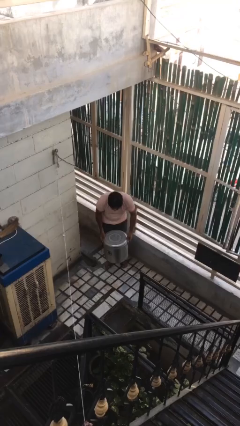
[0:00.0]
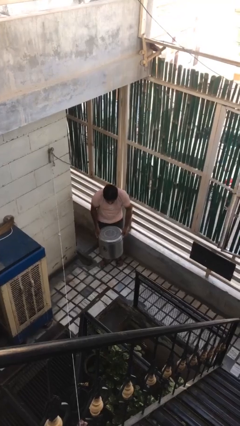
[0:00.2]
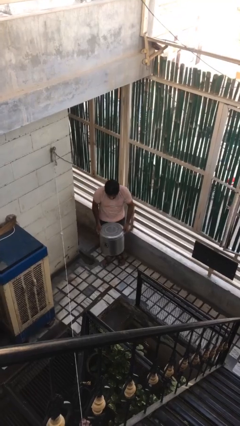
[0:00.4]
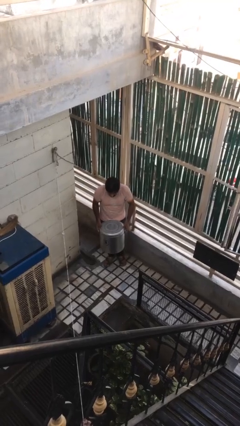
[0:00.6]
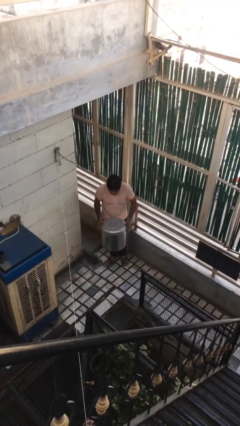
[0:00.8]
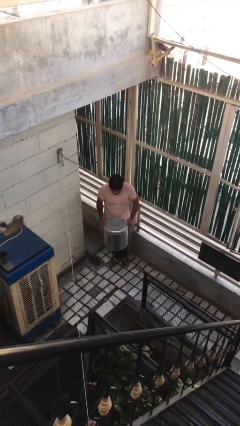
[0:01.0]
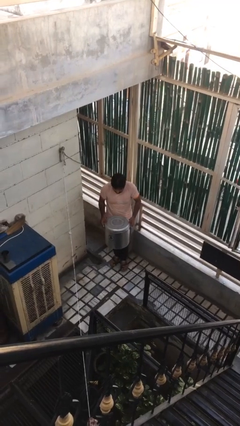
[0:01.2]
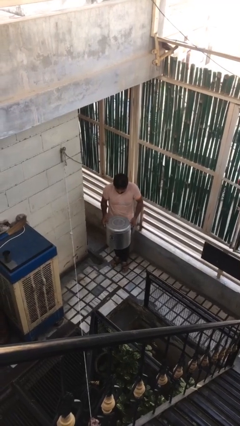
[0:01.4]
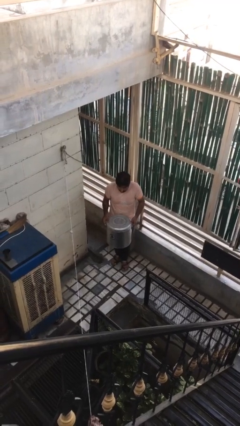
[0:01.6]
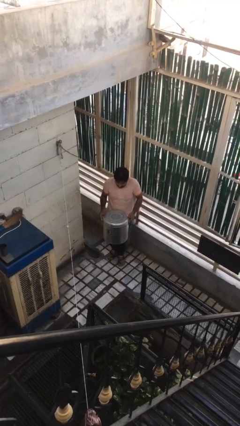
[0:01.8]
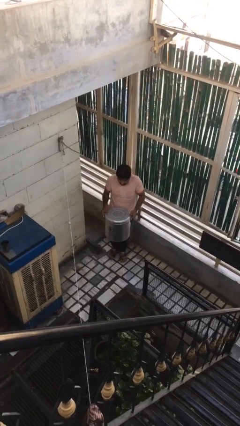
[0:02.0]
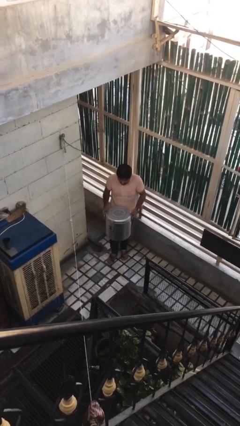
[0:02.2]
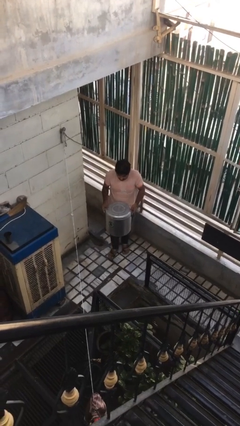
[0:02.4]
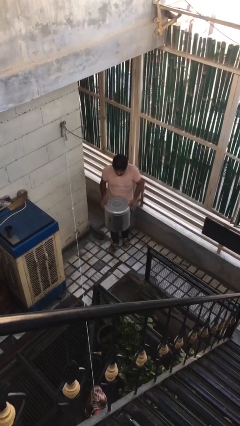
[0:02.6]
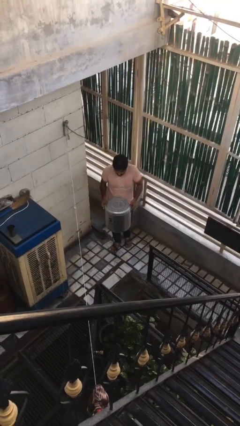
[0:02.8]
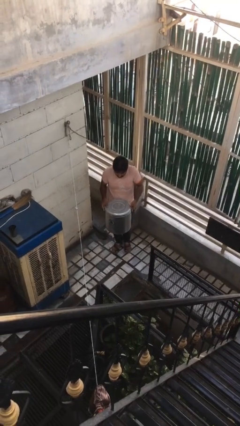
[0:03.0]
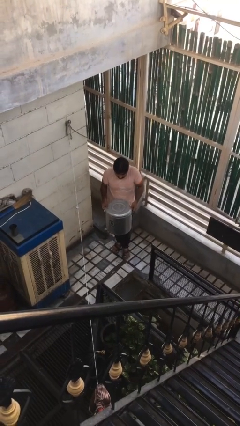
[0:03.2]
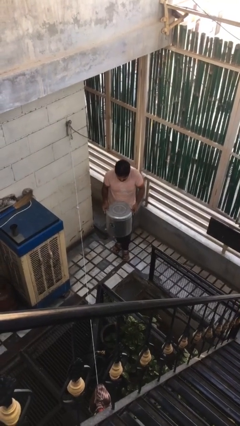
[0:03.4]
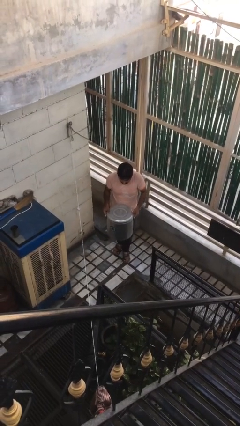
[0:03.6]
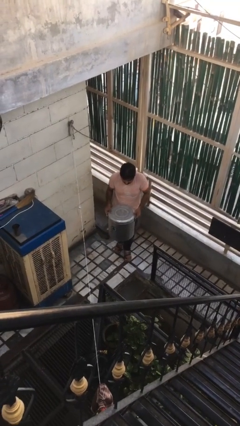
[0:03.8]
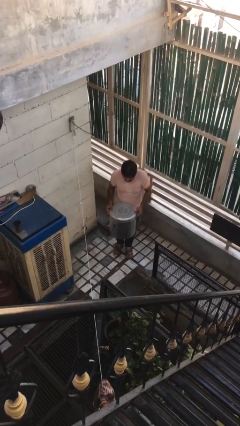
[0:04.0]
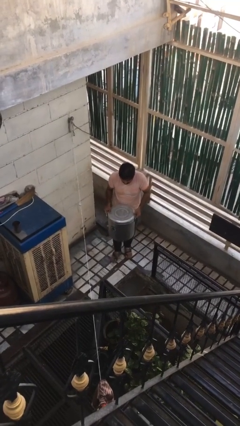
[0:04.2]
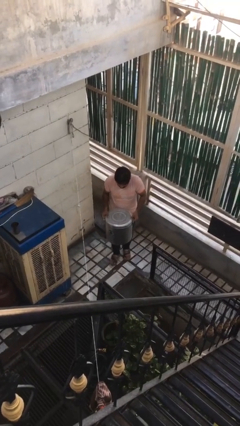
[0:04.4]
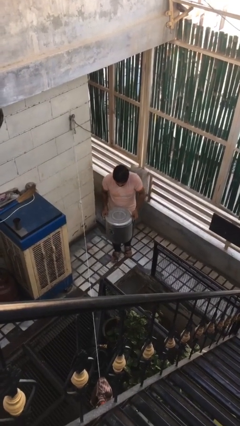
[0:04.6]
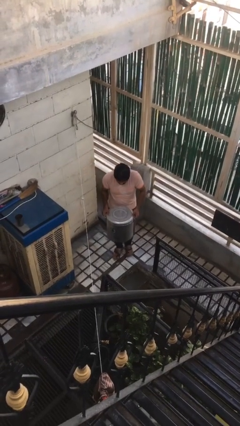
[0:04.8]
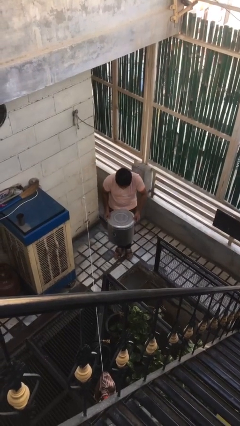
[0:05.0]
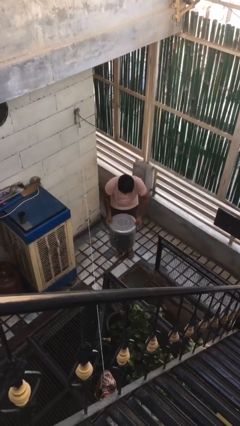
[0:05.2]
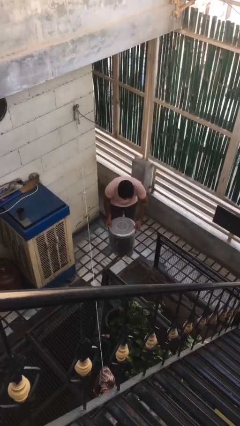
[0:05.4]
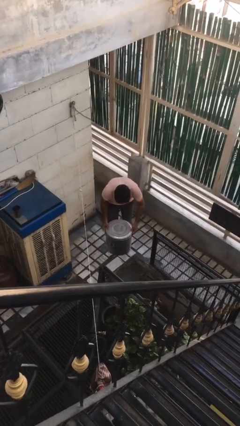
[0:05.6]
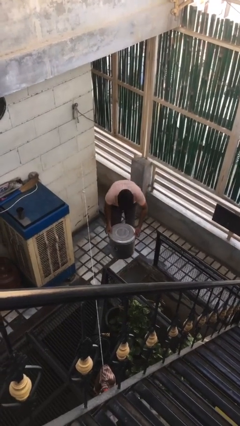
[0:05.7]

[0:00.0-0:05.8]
person carries heavy object

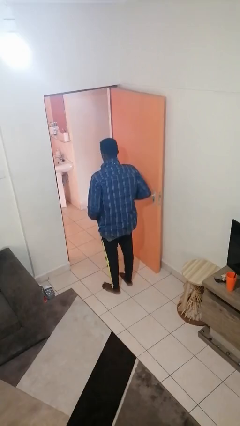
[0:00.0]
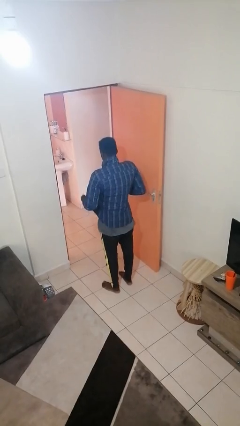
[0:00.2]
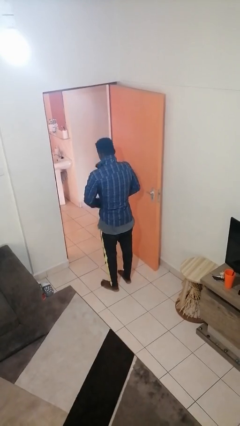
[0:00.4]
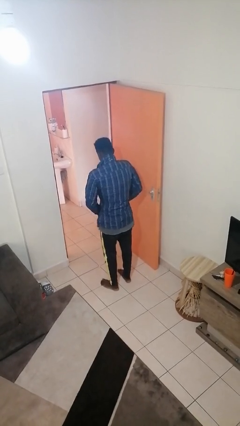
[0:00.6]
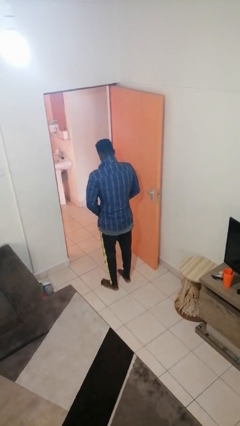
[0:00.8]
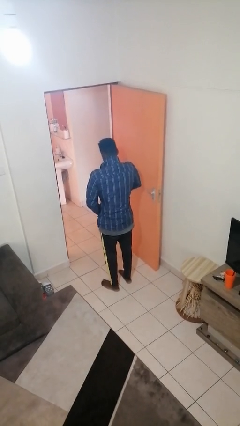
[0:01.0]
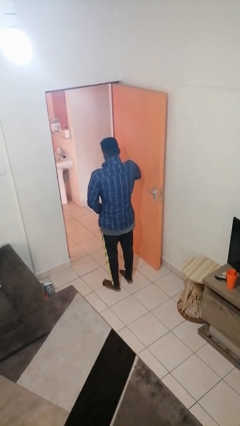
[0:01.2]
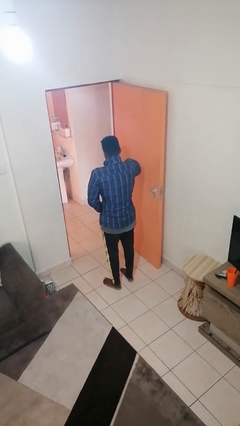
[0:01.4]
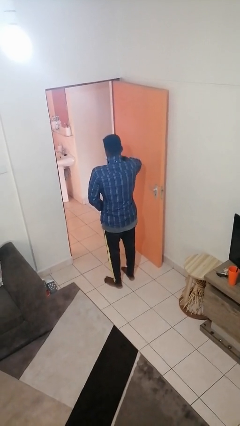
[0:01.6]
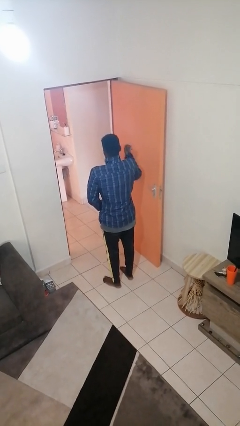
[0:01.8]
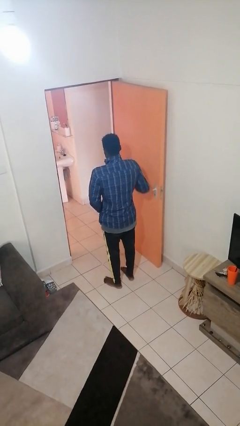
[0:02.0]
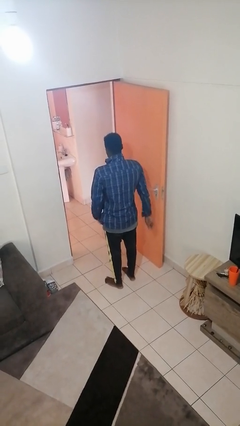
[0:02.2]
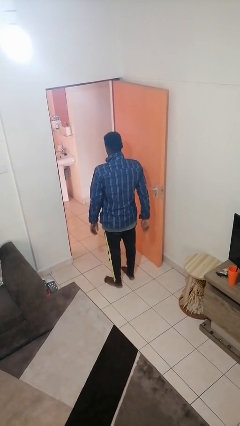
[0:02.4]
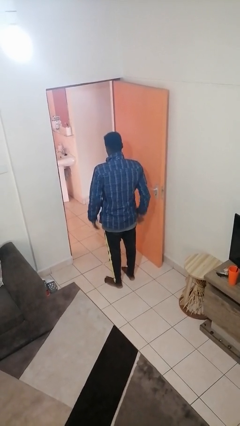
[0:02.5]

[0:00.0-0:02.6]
person zips up jacket

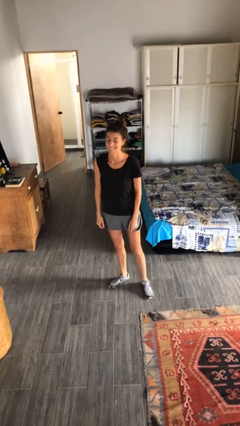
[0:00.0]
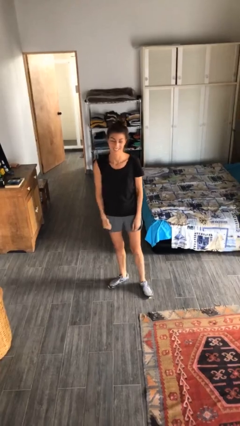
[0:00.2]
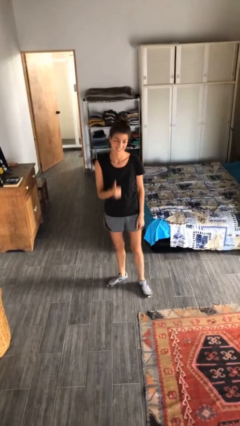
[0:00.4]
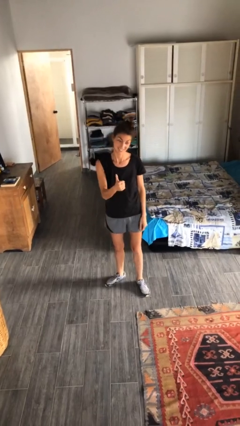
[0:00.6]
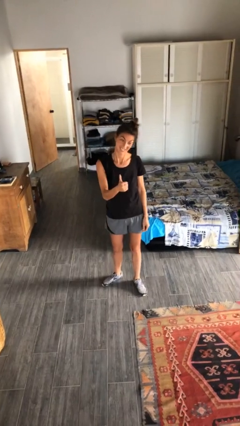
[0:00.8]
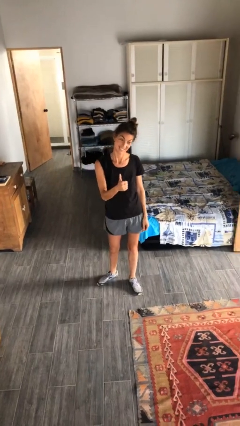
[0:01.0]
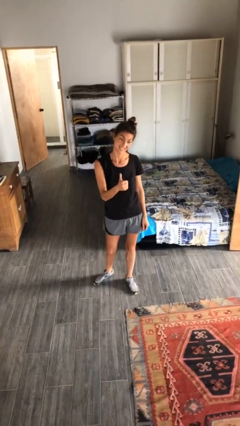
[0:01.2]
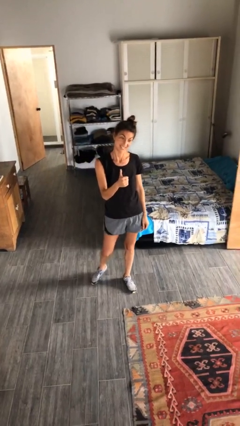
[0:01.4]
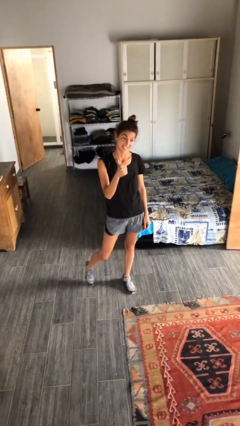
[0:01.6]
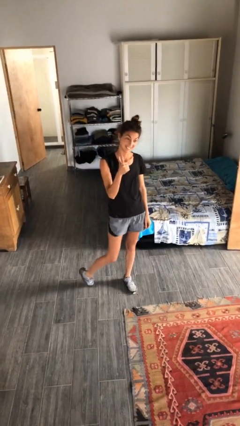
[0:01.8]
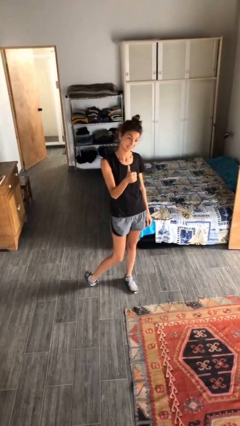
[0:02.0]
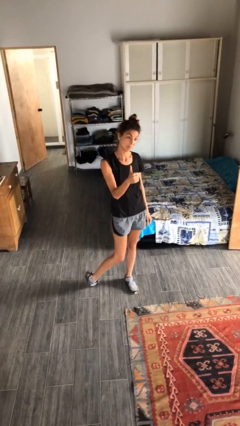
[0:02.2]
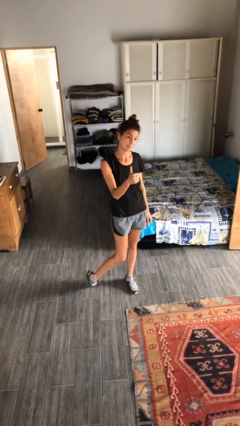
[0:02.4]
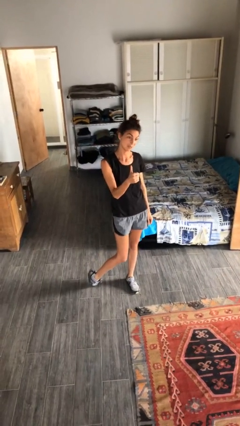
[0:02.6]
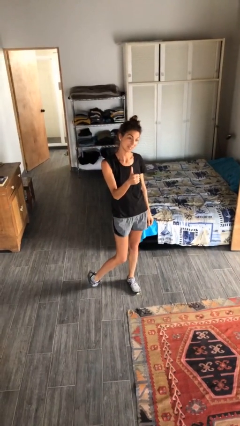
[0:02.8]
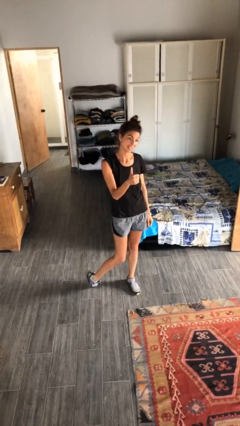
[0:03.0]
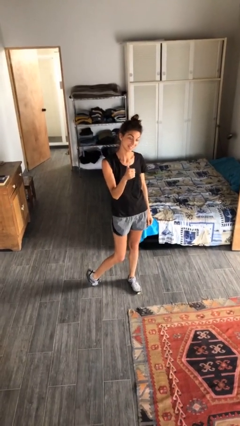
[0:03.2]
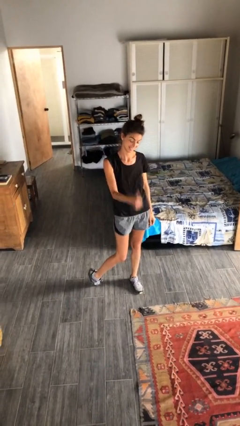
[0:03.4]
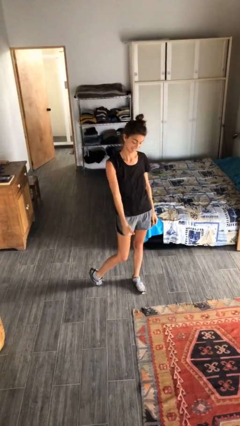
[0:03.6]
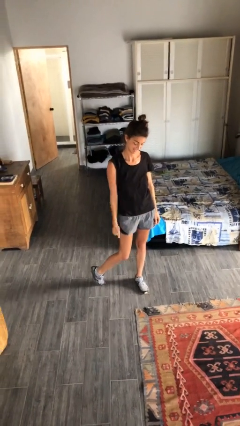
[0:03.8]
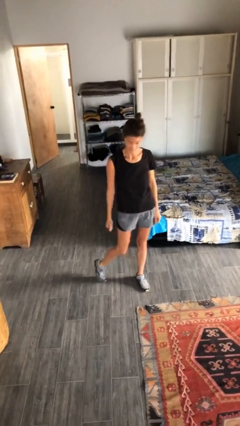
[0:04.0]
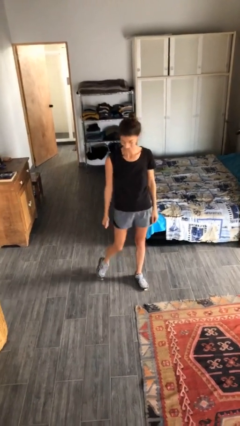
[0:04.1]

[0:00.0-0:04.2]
person gestures thumbs up

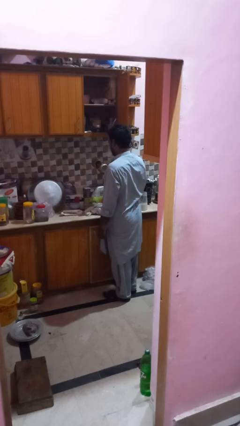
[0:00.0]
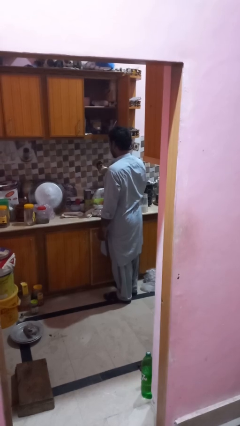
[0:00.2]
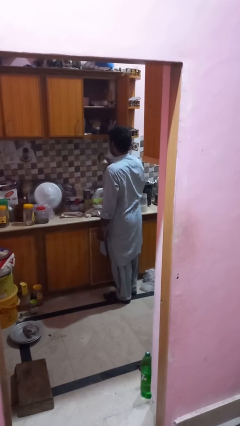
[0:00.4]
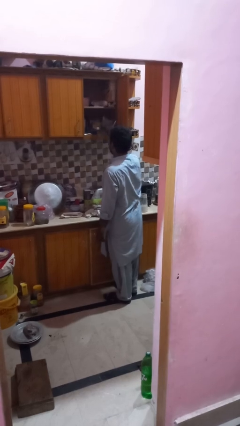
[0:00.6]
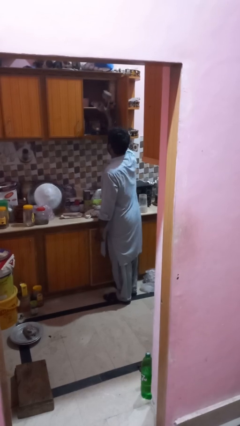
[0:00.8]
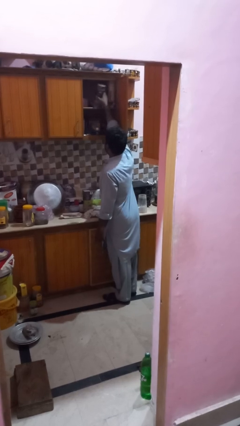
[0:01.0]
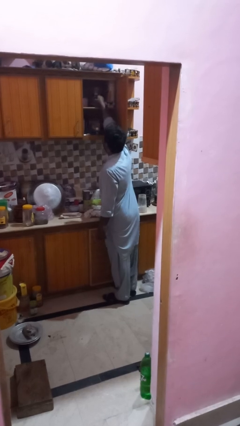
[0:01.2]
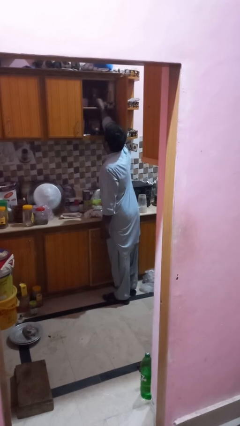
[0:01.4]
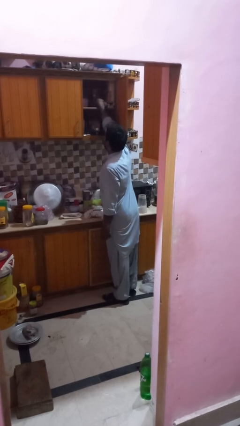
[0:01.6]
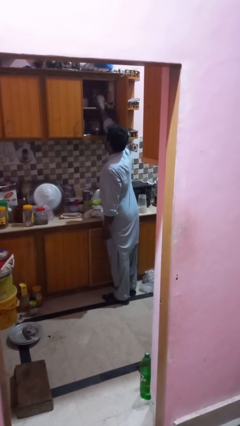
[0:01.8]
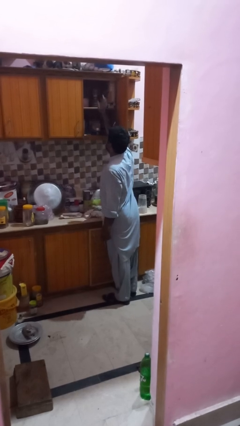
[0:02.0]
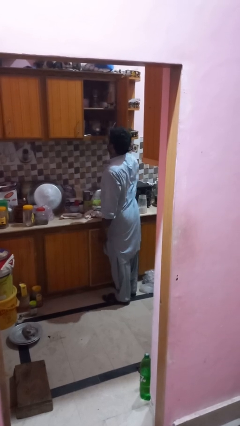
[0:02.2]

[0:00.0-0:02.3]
person puts object in cabinet

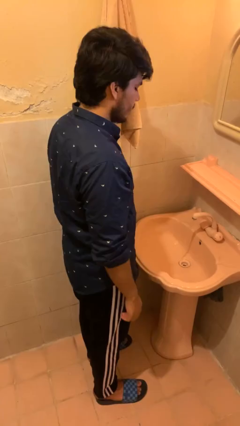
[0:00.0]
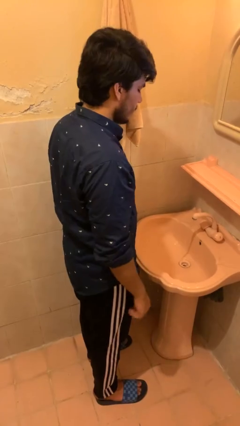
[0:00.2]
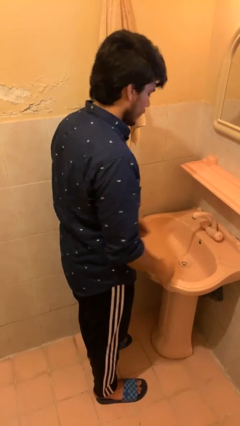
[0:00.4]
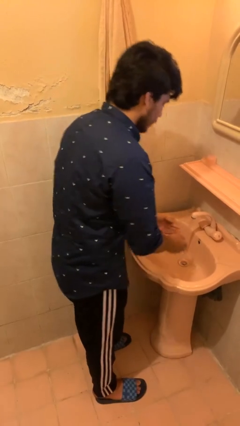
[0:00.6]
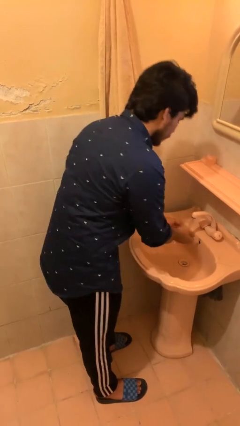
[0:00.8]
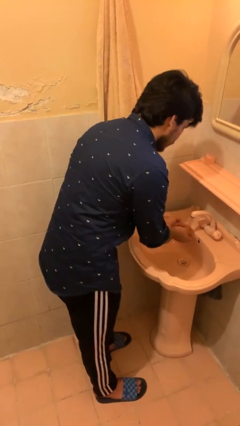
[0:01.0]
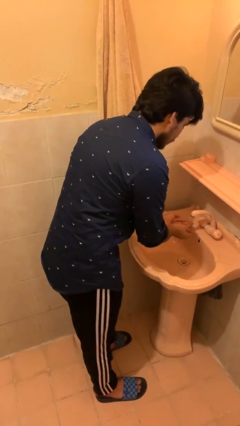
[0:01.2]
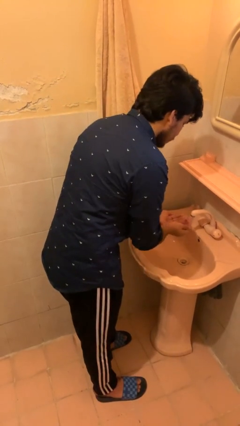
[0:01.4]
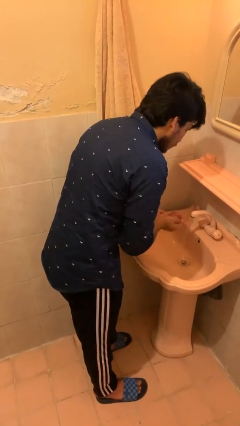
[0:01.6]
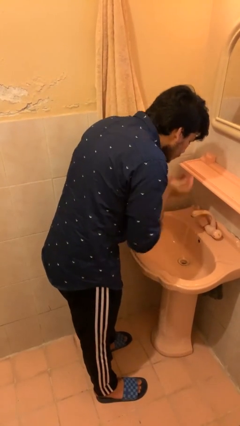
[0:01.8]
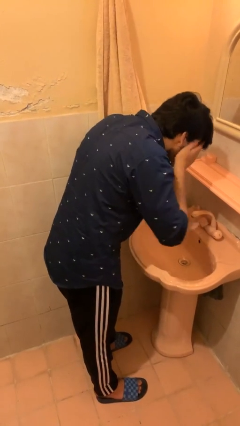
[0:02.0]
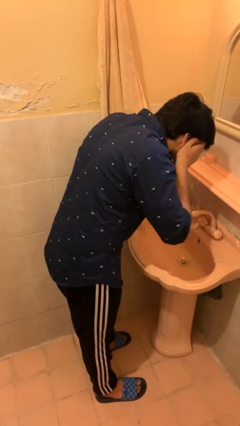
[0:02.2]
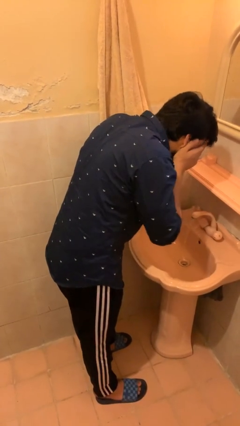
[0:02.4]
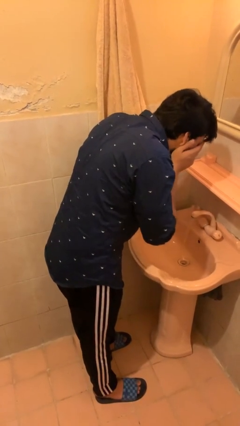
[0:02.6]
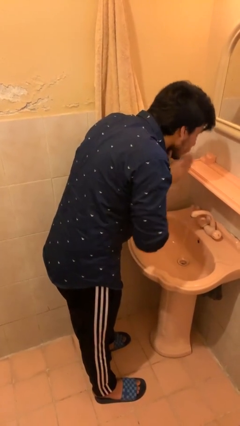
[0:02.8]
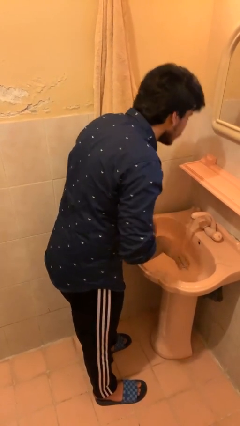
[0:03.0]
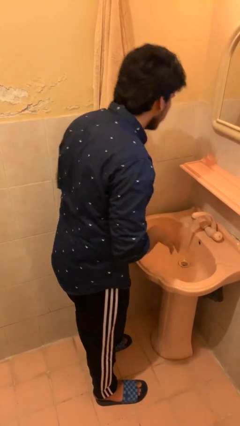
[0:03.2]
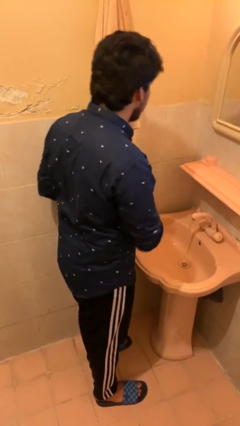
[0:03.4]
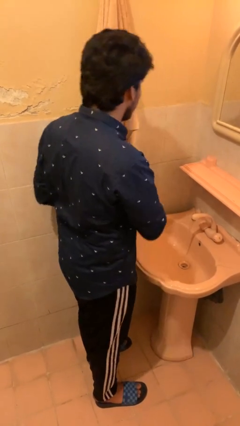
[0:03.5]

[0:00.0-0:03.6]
person washes face
